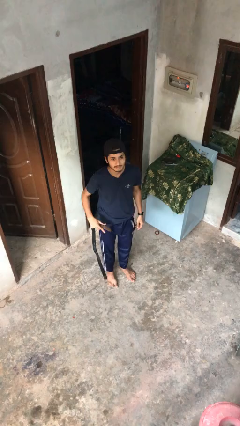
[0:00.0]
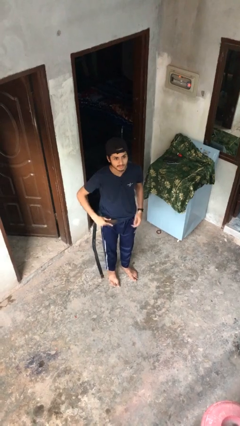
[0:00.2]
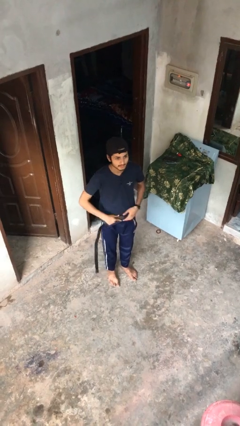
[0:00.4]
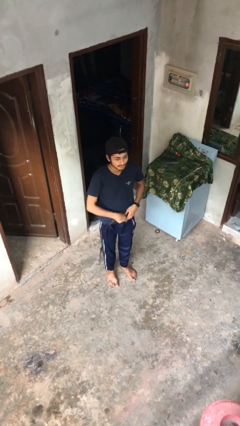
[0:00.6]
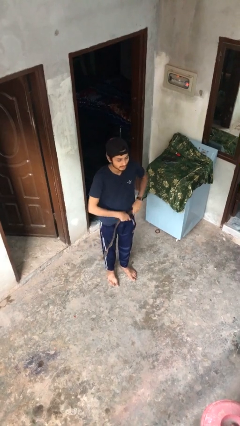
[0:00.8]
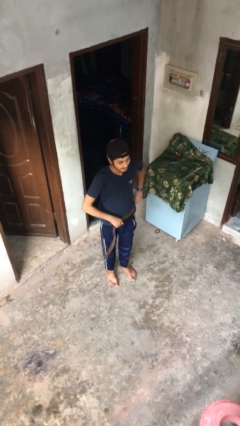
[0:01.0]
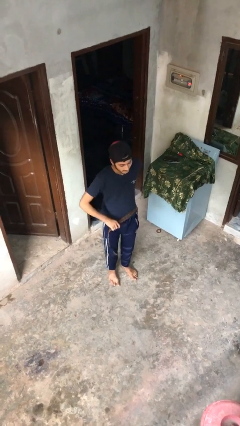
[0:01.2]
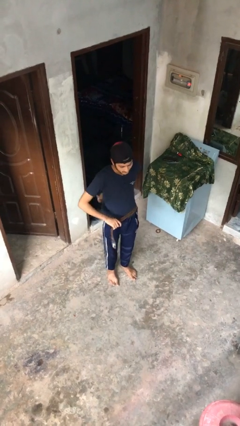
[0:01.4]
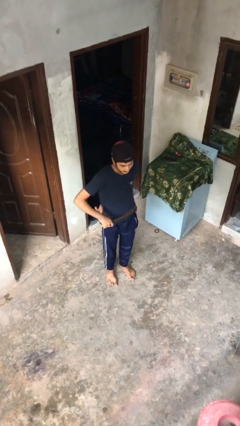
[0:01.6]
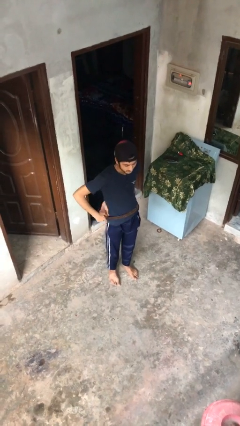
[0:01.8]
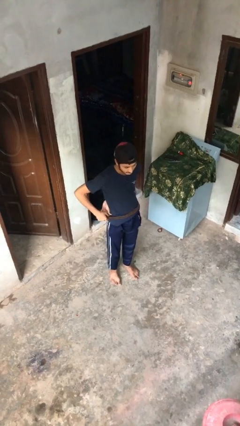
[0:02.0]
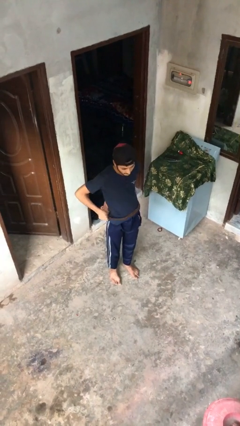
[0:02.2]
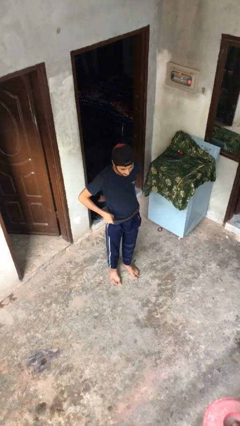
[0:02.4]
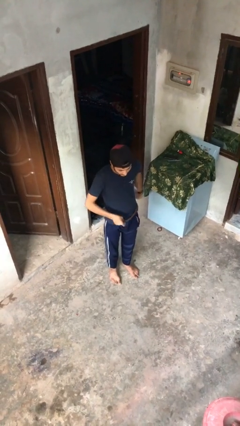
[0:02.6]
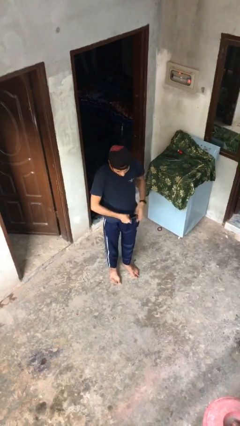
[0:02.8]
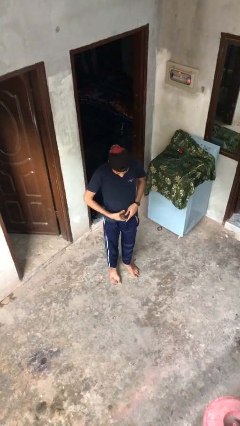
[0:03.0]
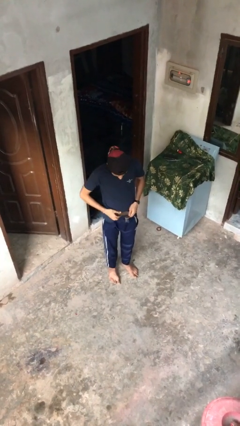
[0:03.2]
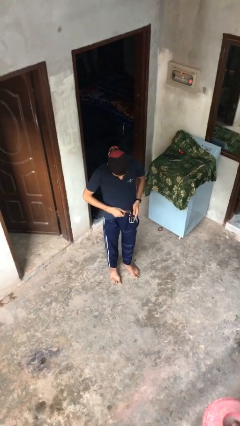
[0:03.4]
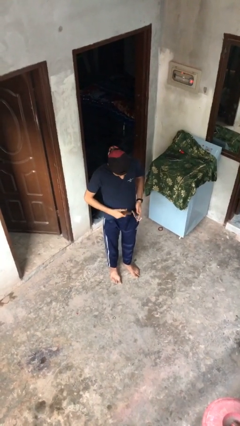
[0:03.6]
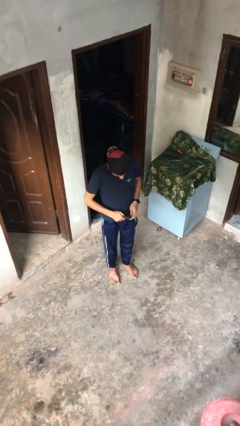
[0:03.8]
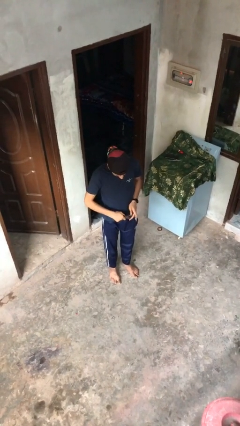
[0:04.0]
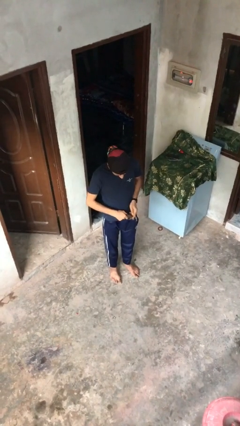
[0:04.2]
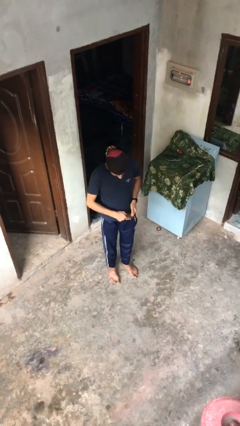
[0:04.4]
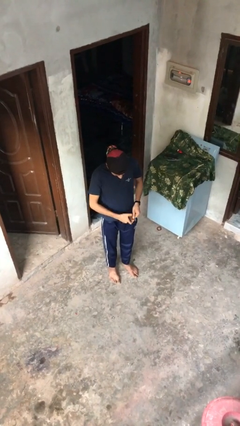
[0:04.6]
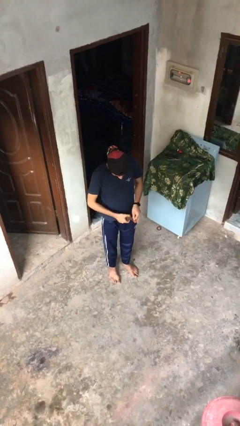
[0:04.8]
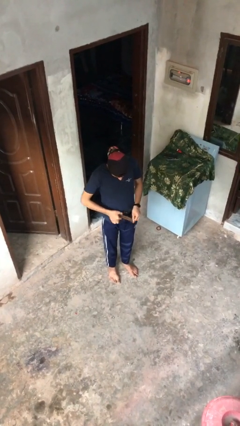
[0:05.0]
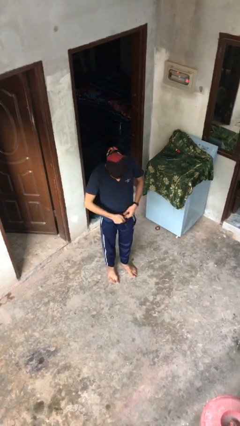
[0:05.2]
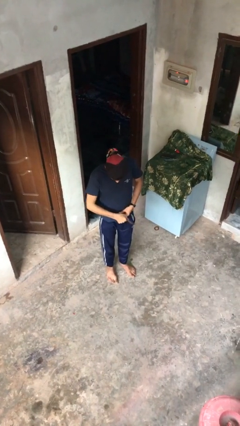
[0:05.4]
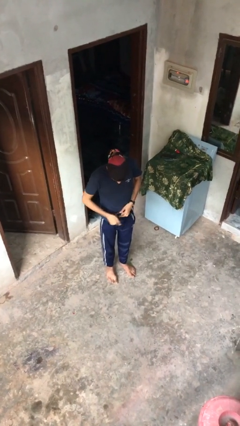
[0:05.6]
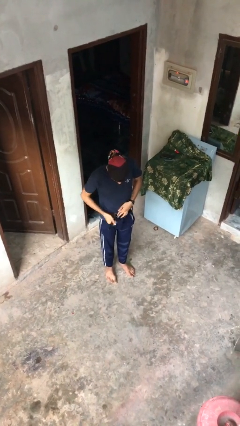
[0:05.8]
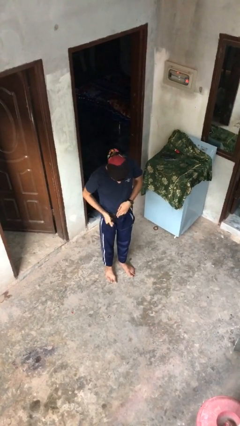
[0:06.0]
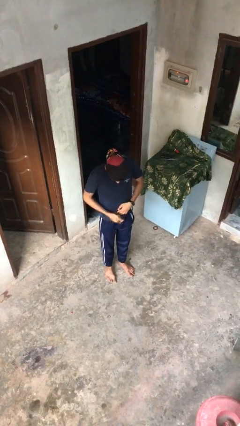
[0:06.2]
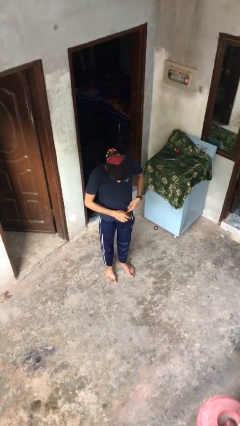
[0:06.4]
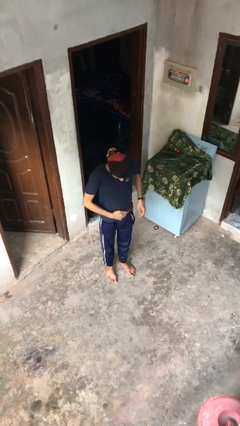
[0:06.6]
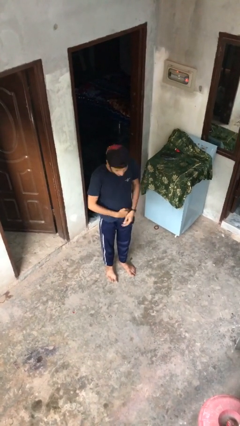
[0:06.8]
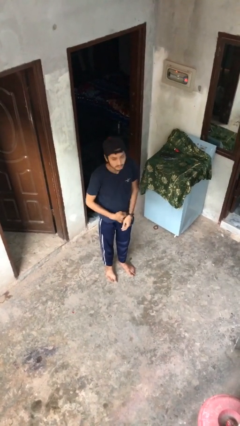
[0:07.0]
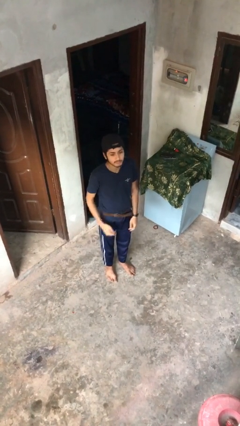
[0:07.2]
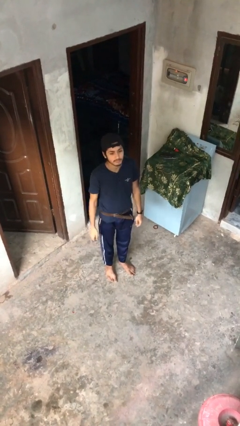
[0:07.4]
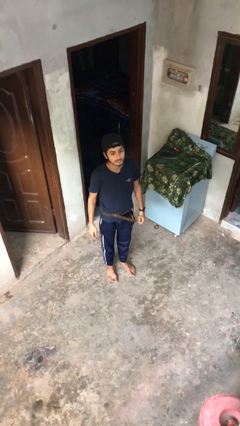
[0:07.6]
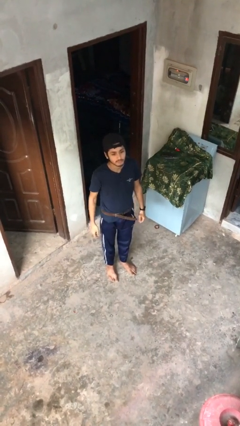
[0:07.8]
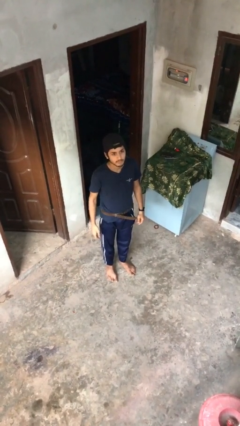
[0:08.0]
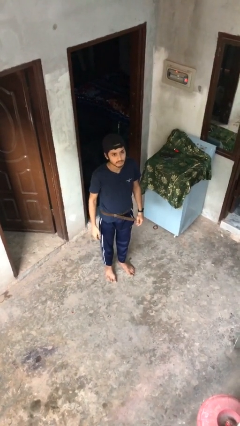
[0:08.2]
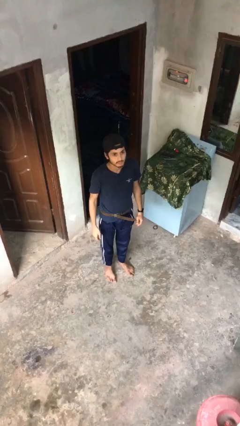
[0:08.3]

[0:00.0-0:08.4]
person puts on belt

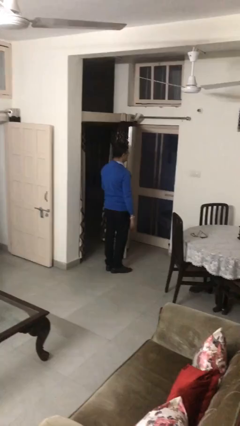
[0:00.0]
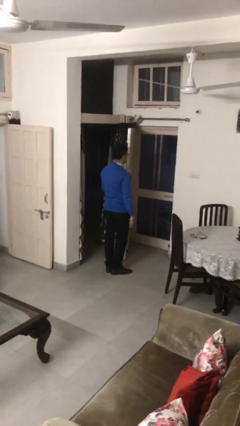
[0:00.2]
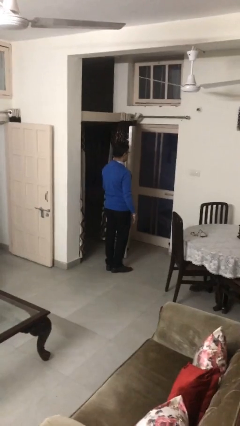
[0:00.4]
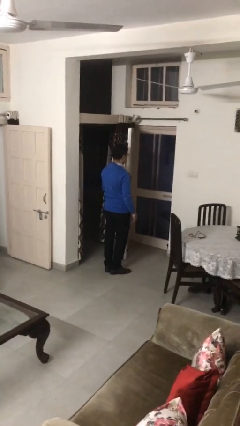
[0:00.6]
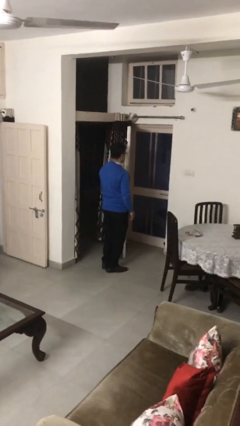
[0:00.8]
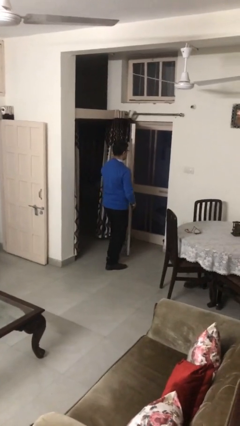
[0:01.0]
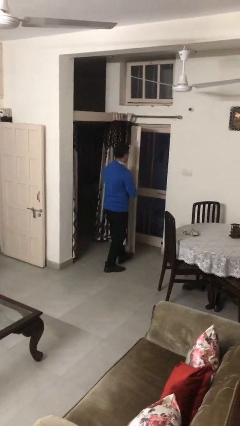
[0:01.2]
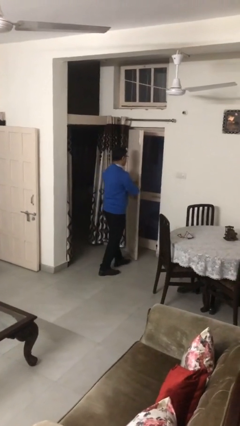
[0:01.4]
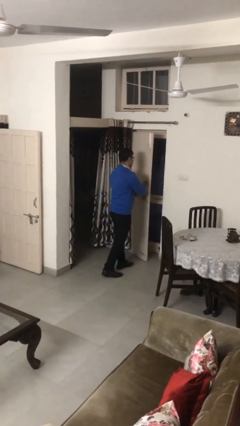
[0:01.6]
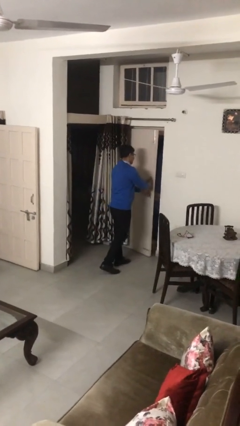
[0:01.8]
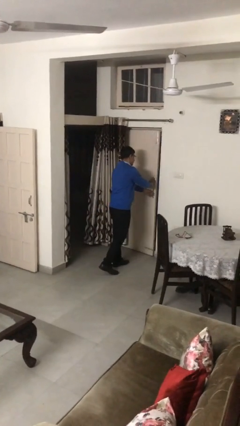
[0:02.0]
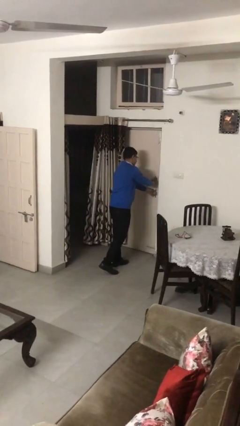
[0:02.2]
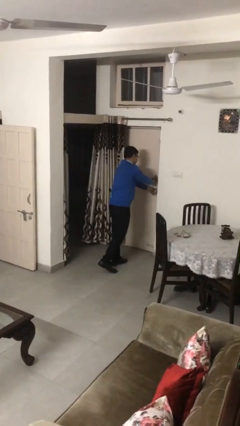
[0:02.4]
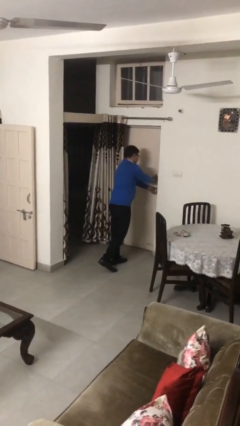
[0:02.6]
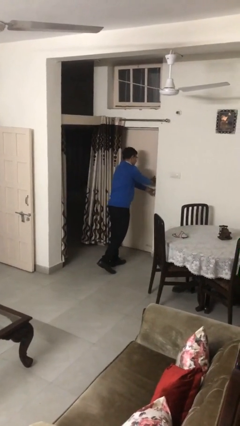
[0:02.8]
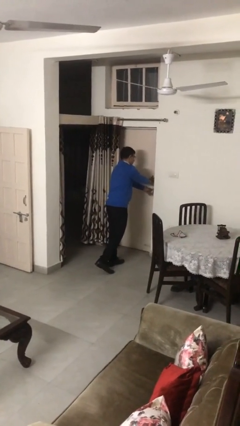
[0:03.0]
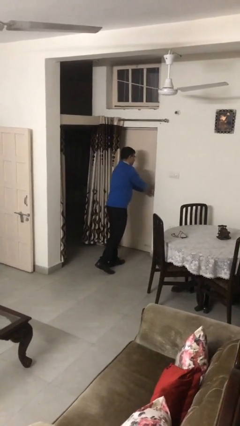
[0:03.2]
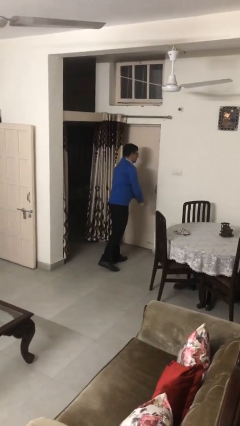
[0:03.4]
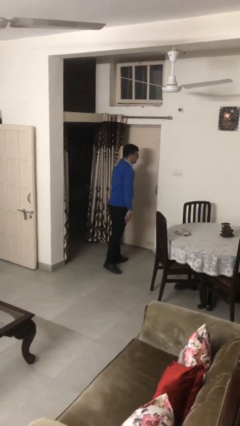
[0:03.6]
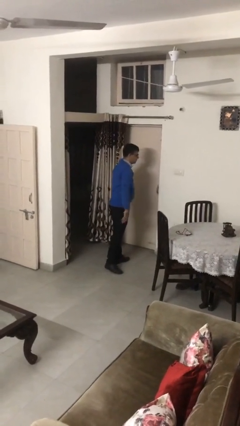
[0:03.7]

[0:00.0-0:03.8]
person closes facility door

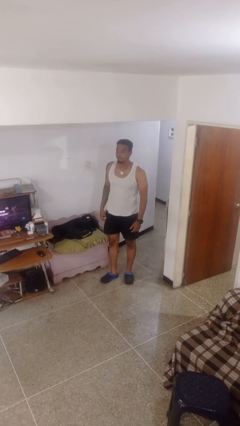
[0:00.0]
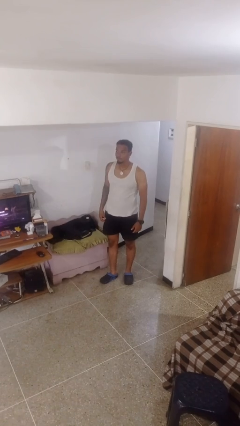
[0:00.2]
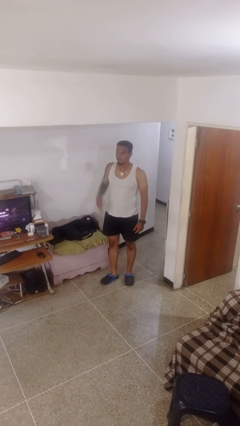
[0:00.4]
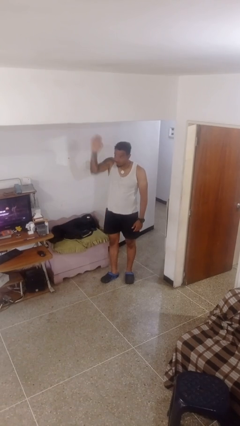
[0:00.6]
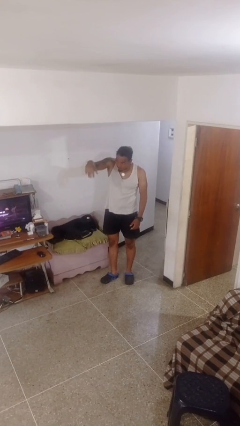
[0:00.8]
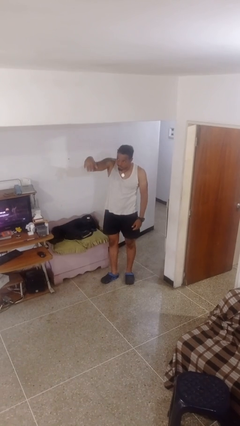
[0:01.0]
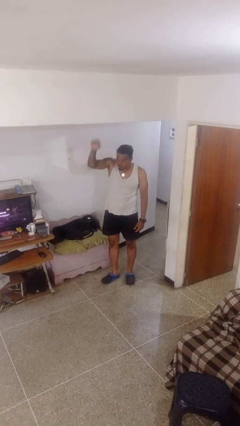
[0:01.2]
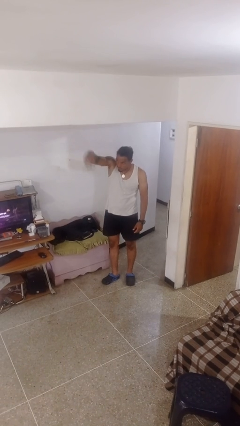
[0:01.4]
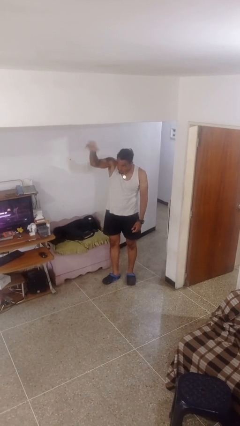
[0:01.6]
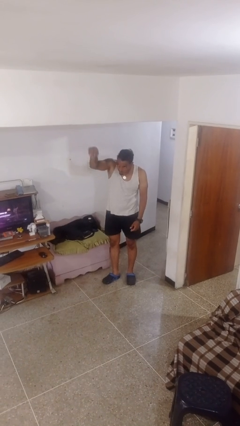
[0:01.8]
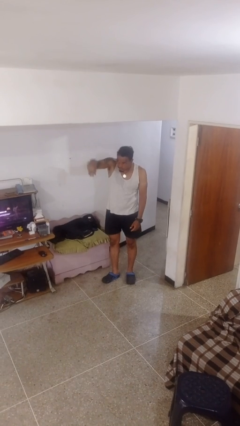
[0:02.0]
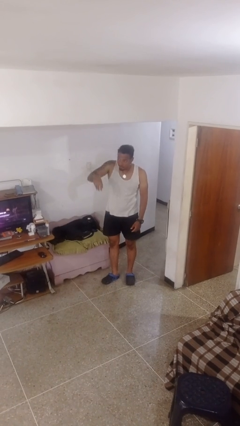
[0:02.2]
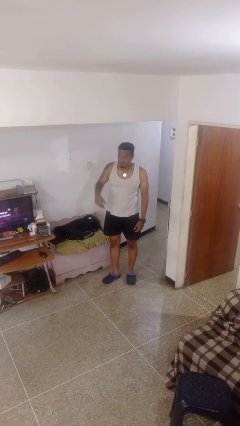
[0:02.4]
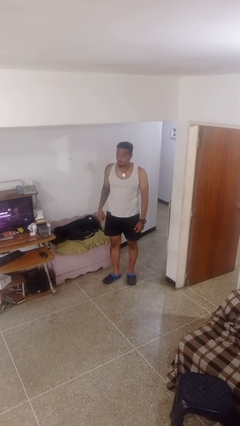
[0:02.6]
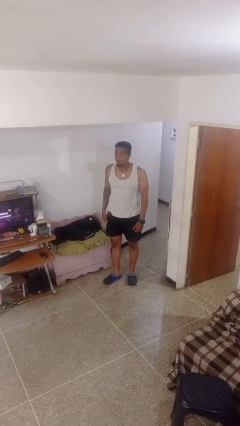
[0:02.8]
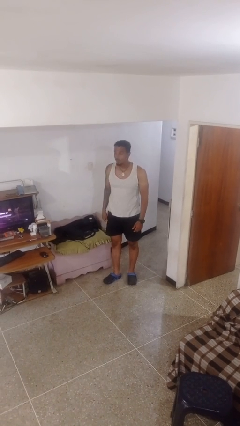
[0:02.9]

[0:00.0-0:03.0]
person gestures come here

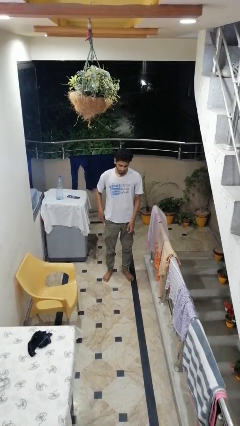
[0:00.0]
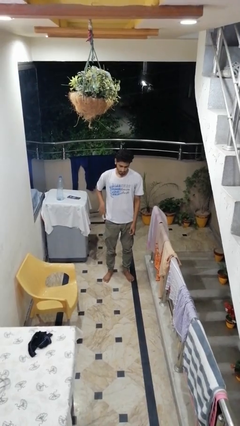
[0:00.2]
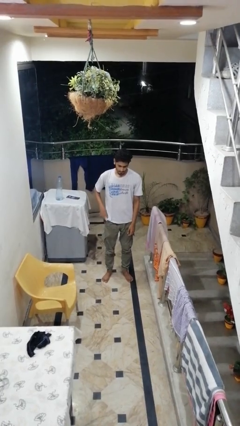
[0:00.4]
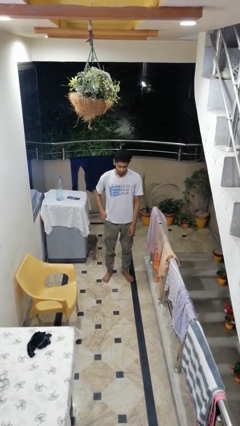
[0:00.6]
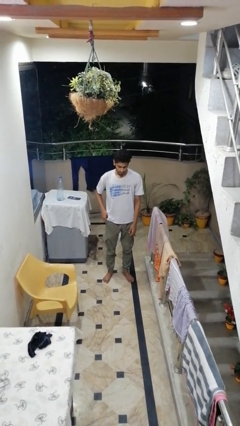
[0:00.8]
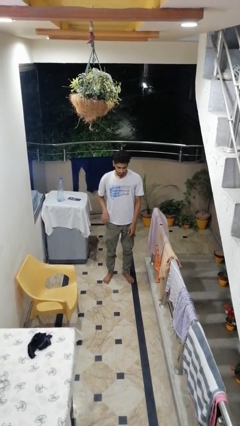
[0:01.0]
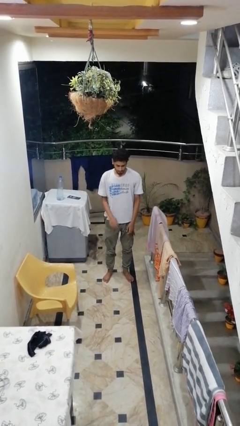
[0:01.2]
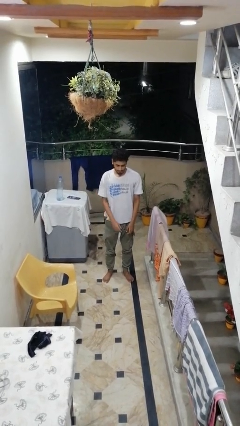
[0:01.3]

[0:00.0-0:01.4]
person puts phone into pocket

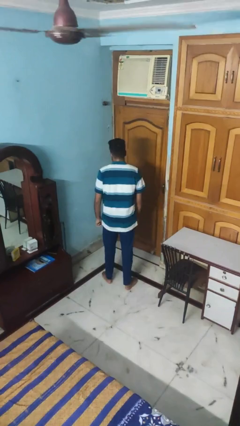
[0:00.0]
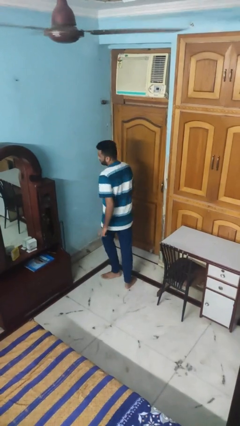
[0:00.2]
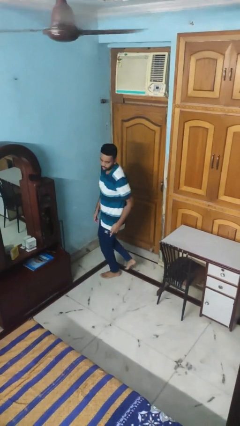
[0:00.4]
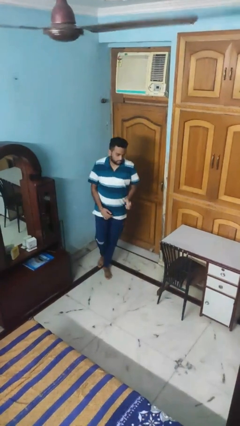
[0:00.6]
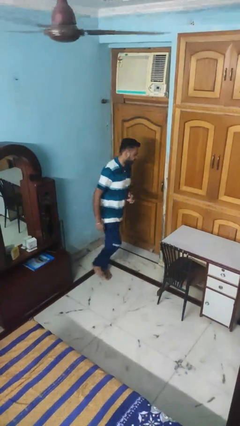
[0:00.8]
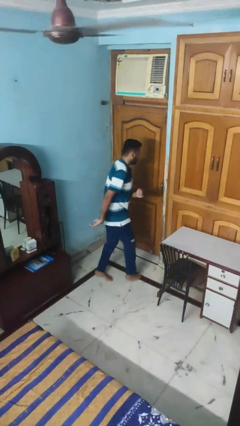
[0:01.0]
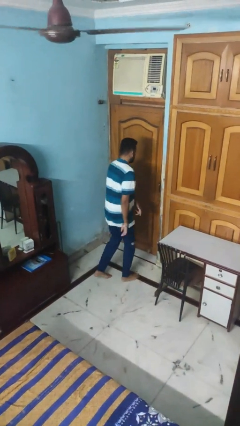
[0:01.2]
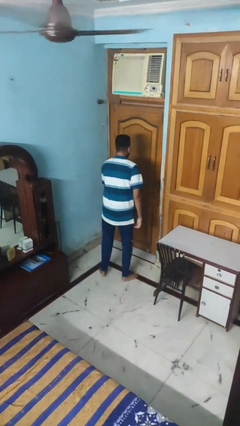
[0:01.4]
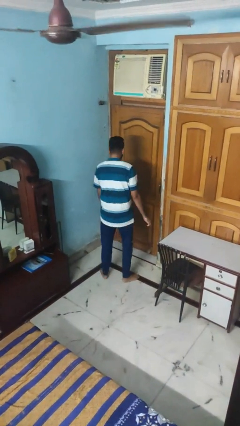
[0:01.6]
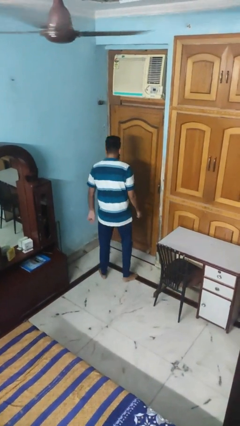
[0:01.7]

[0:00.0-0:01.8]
person twirls
